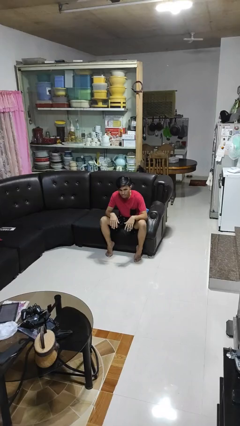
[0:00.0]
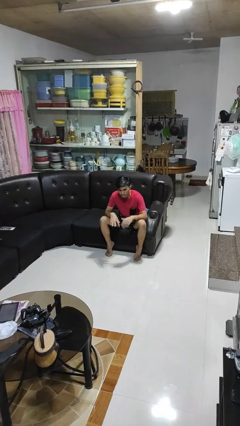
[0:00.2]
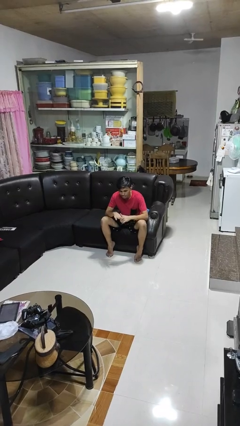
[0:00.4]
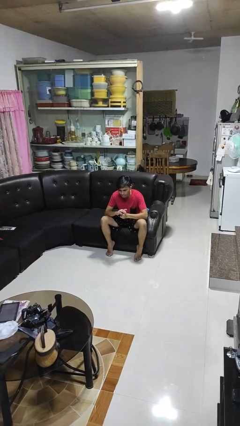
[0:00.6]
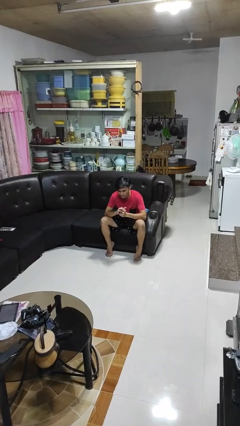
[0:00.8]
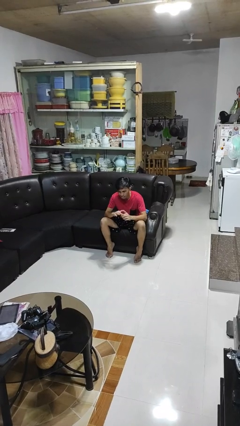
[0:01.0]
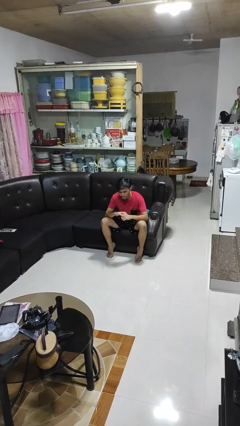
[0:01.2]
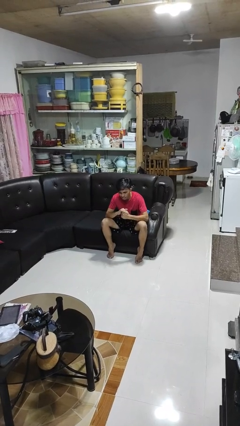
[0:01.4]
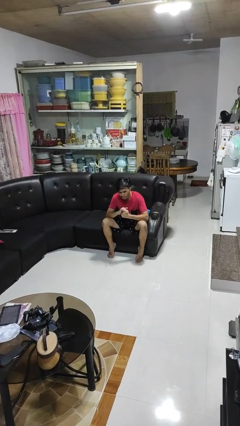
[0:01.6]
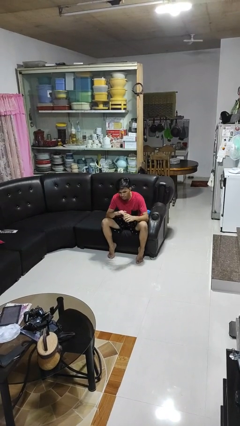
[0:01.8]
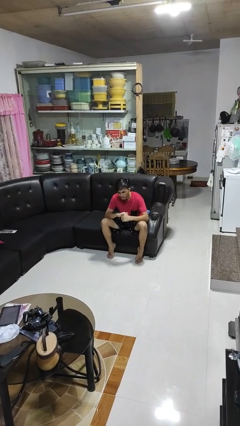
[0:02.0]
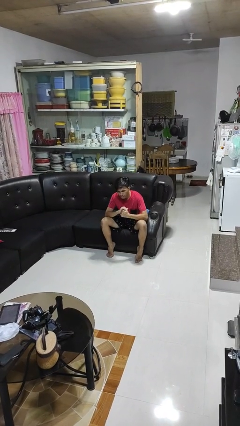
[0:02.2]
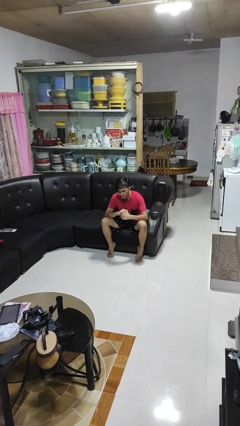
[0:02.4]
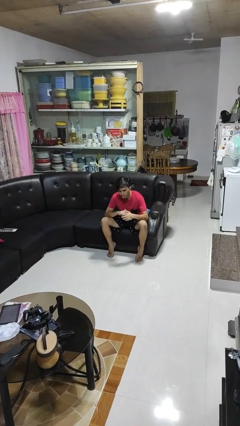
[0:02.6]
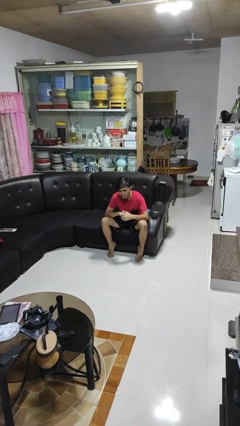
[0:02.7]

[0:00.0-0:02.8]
person cracks knuckles

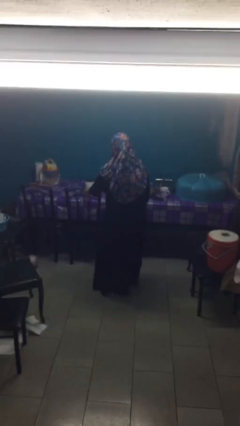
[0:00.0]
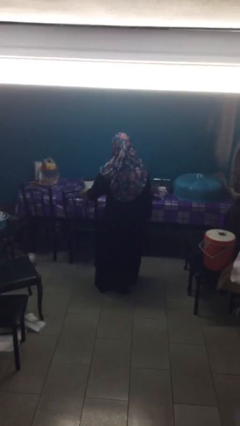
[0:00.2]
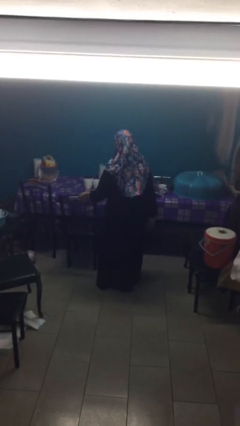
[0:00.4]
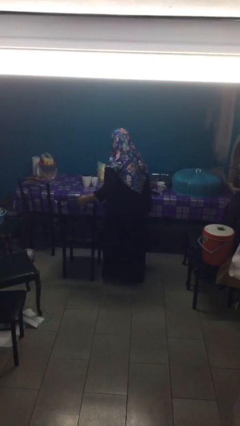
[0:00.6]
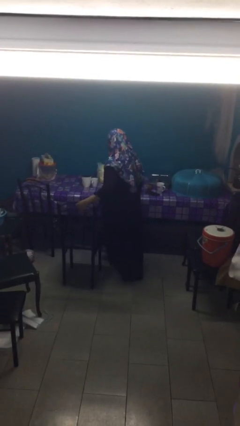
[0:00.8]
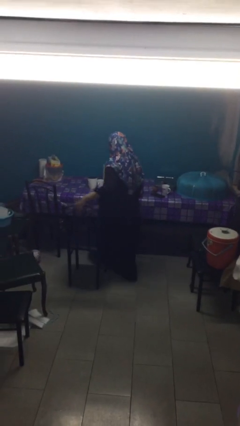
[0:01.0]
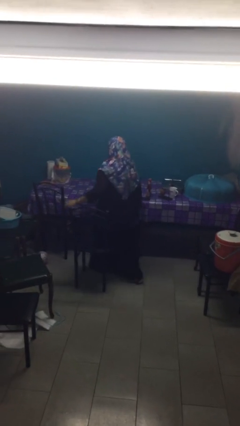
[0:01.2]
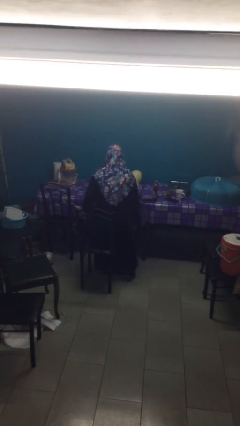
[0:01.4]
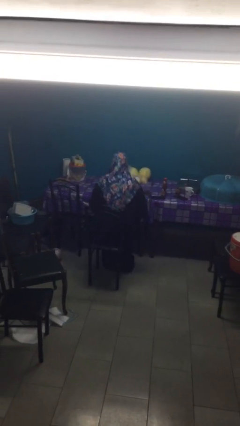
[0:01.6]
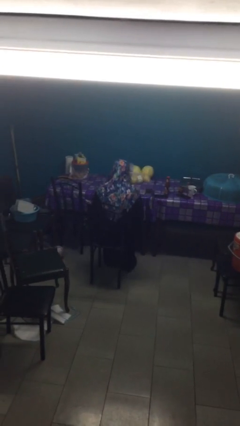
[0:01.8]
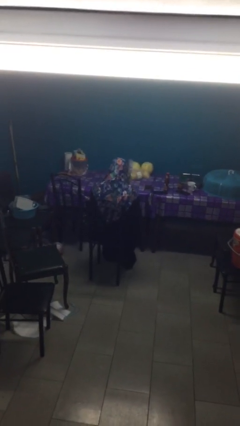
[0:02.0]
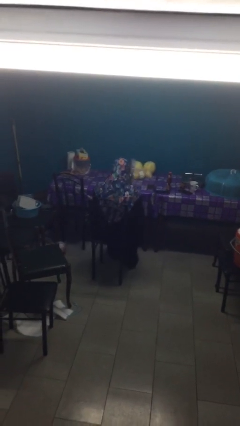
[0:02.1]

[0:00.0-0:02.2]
person sits down

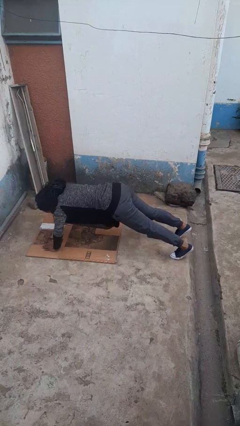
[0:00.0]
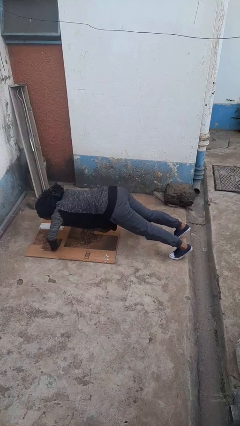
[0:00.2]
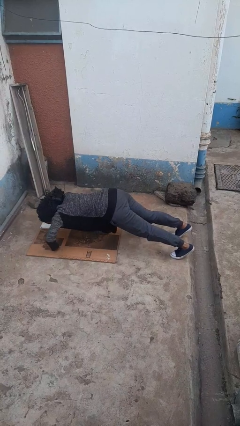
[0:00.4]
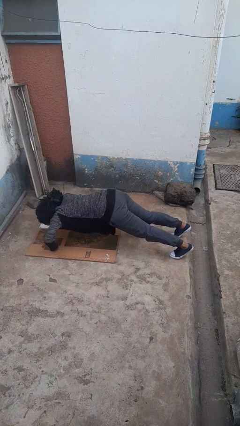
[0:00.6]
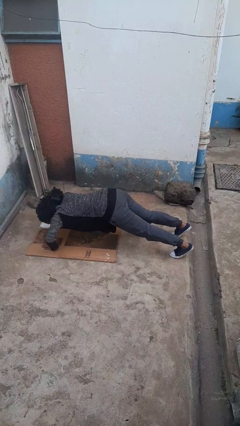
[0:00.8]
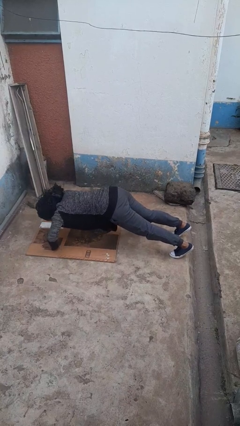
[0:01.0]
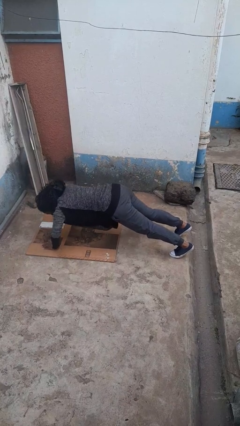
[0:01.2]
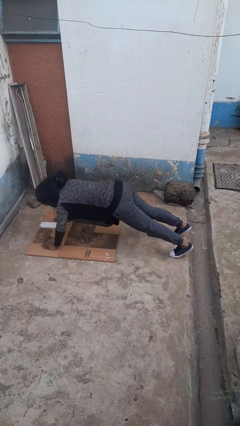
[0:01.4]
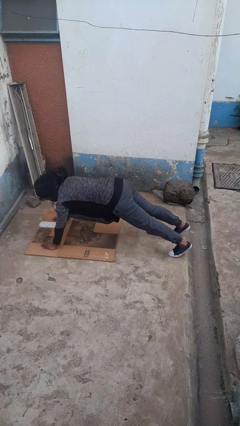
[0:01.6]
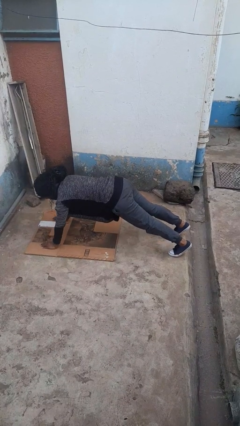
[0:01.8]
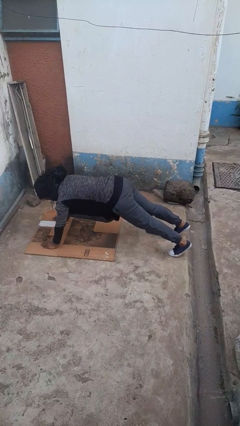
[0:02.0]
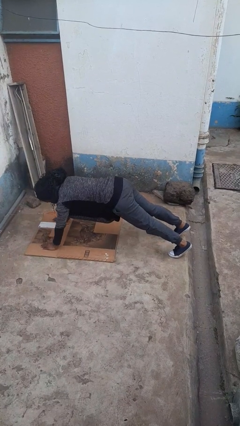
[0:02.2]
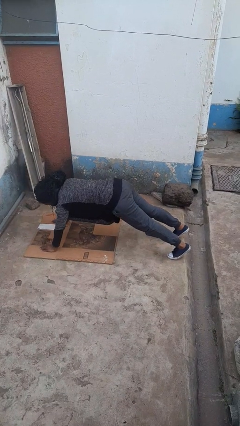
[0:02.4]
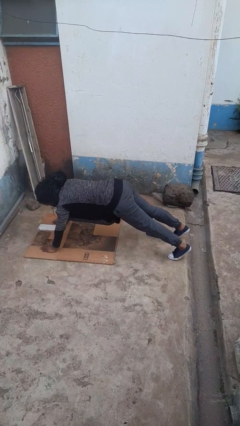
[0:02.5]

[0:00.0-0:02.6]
person exercises with pushup

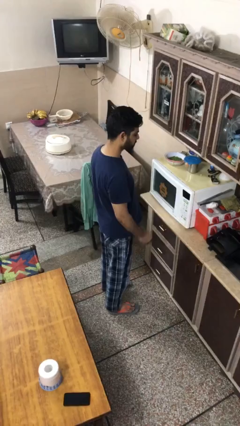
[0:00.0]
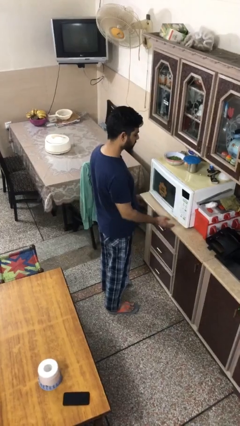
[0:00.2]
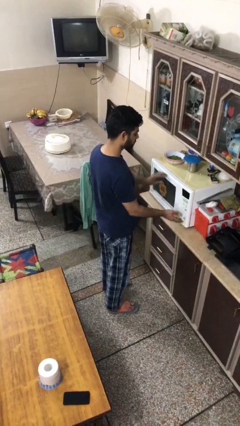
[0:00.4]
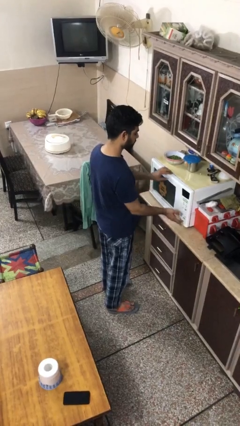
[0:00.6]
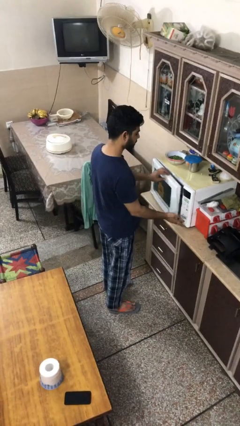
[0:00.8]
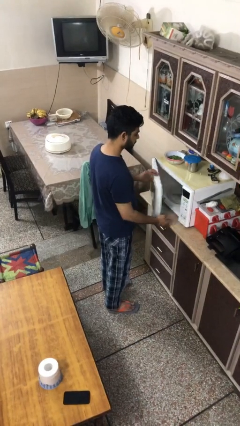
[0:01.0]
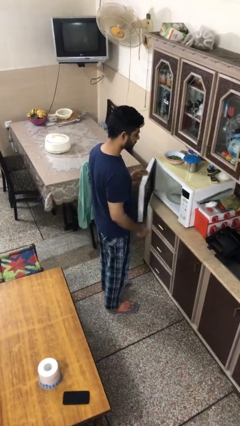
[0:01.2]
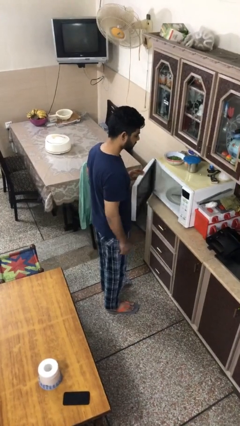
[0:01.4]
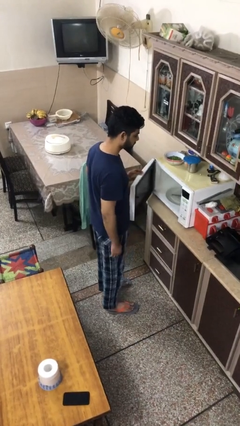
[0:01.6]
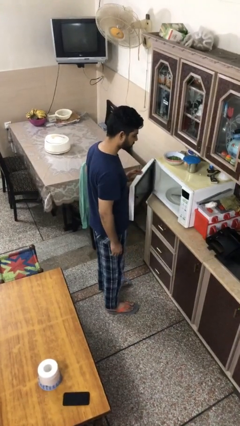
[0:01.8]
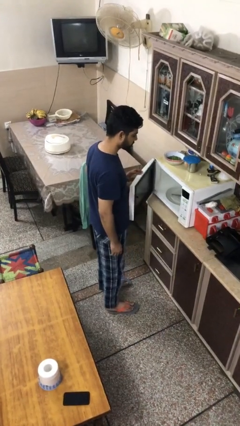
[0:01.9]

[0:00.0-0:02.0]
person opens oven door

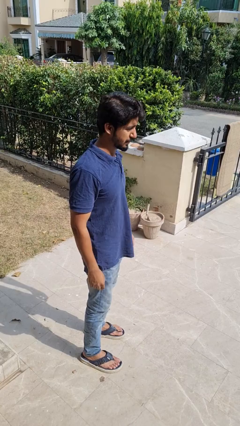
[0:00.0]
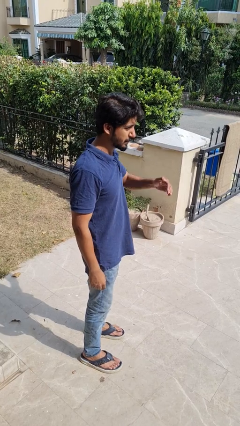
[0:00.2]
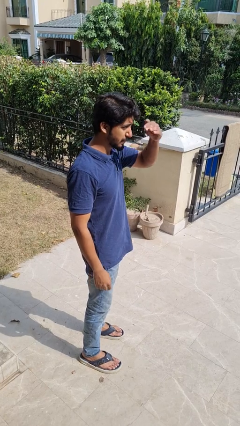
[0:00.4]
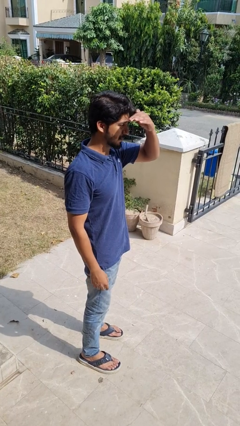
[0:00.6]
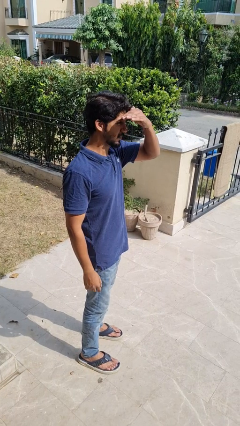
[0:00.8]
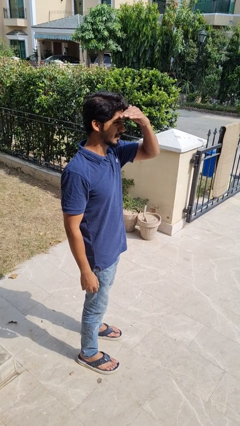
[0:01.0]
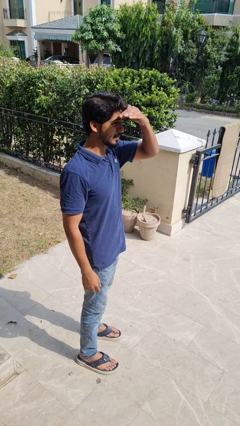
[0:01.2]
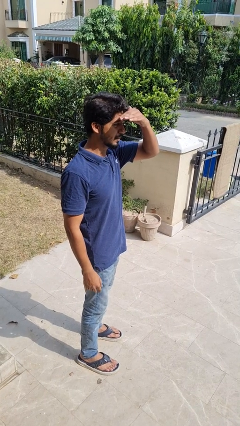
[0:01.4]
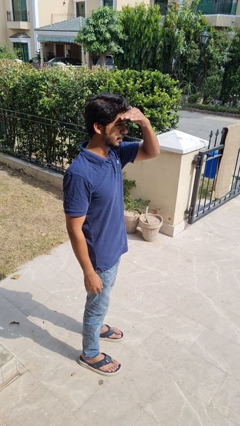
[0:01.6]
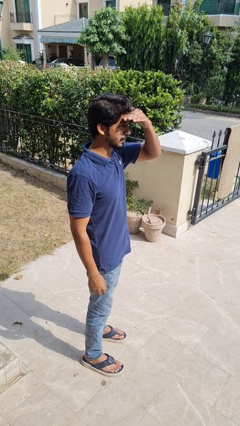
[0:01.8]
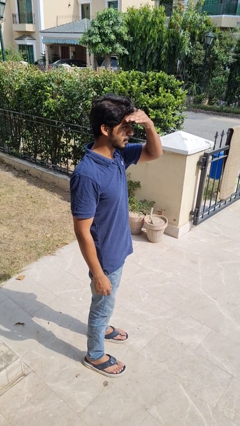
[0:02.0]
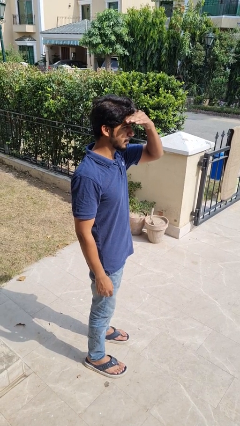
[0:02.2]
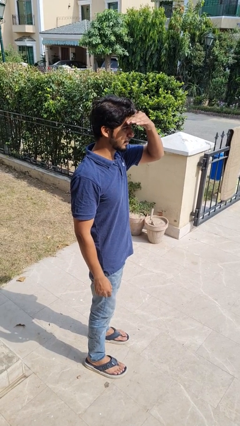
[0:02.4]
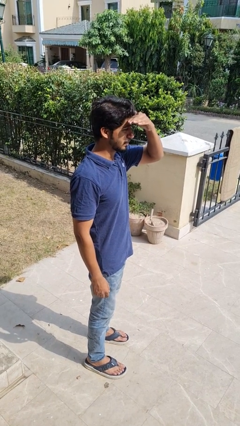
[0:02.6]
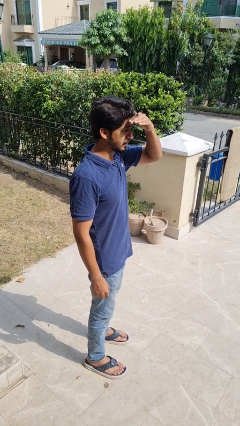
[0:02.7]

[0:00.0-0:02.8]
person shades eyes

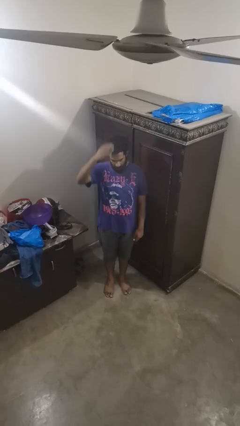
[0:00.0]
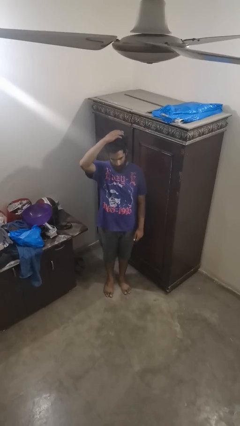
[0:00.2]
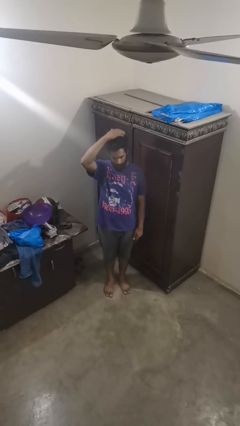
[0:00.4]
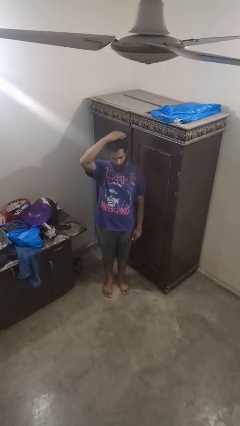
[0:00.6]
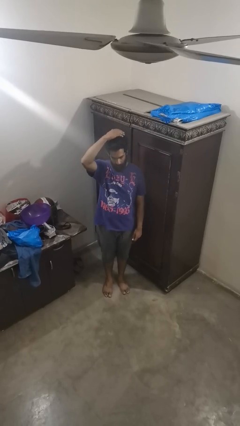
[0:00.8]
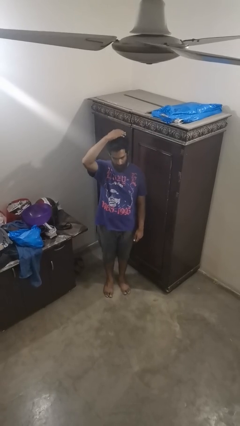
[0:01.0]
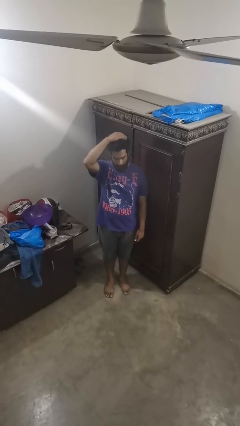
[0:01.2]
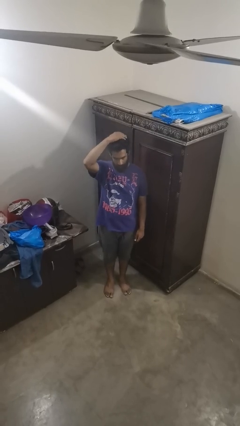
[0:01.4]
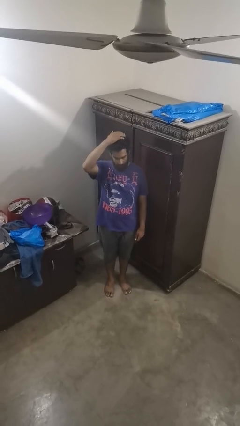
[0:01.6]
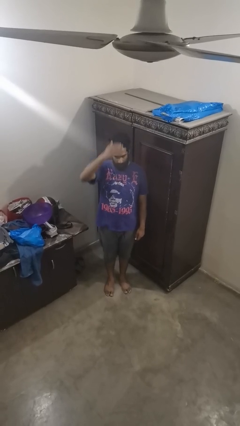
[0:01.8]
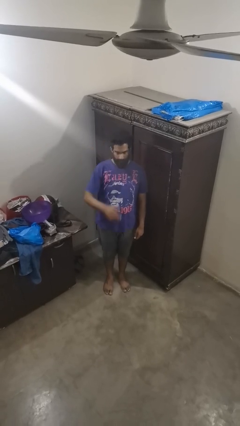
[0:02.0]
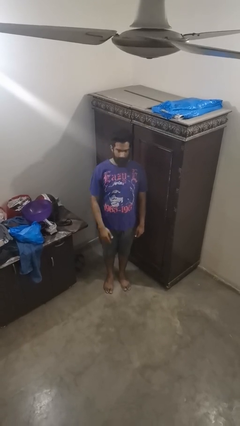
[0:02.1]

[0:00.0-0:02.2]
person pats head

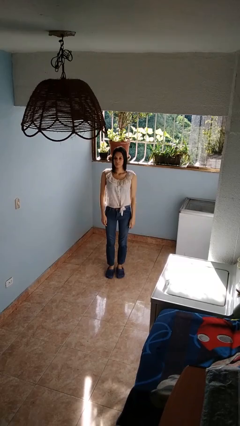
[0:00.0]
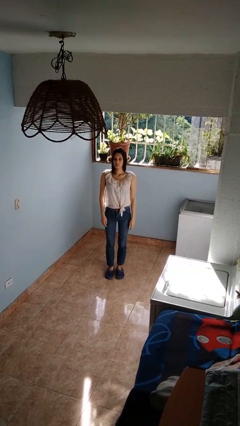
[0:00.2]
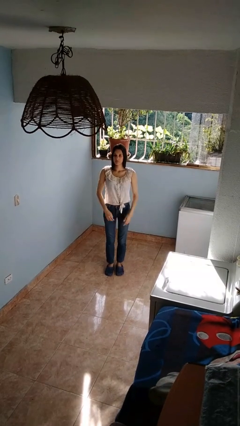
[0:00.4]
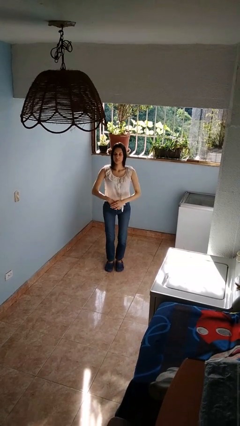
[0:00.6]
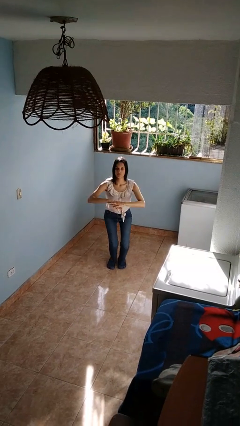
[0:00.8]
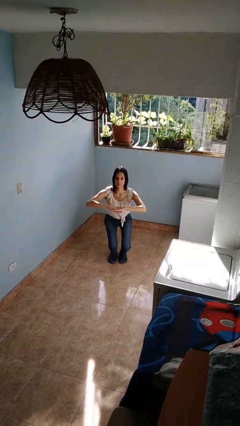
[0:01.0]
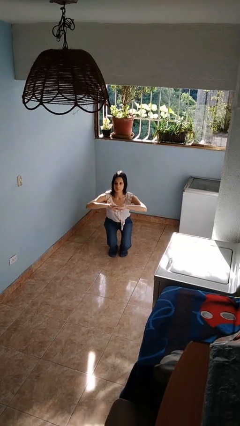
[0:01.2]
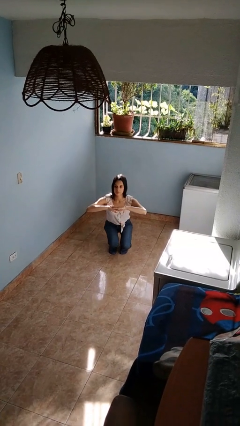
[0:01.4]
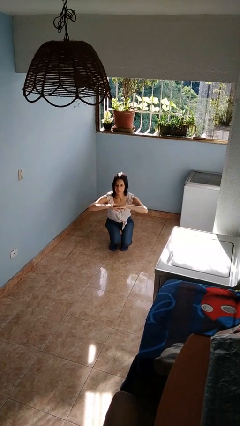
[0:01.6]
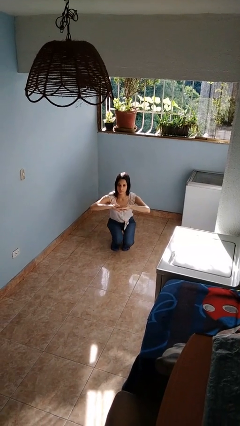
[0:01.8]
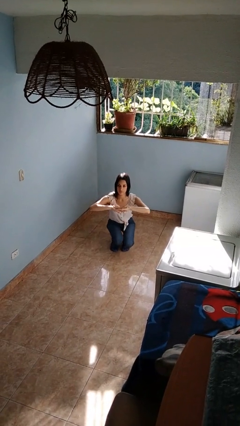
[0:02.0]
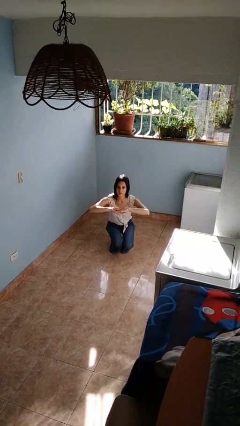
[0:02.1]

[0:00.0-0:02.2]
person squats

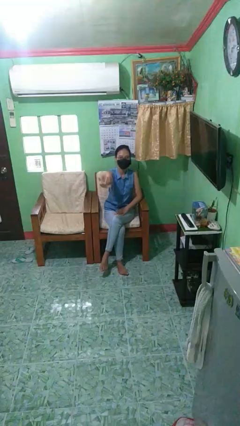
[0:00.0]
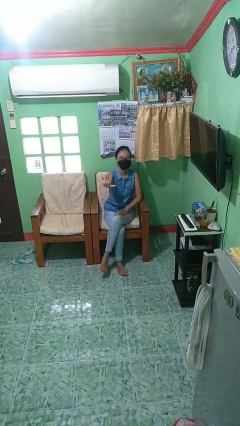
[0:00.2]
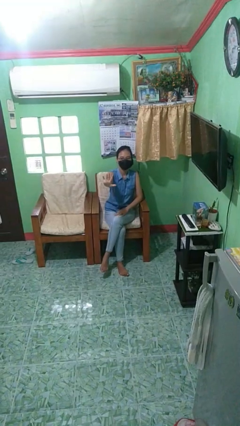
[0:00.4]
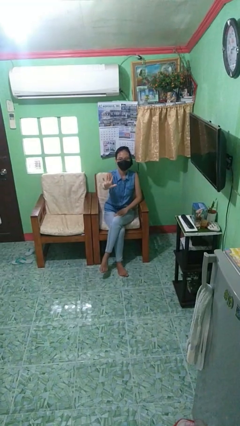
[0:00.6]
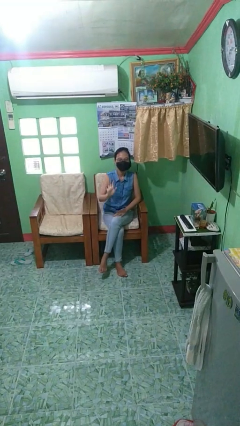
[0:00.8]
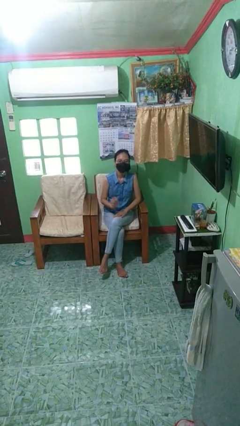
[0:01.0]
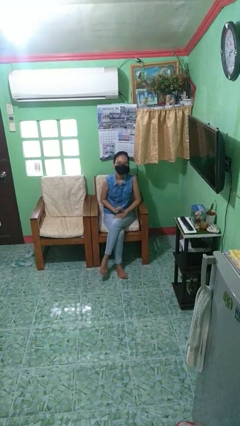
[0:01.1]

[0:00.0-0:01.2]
person gestures stop
